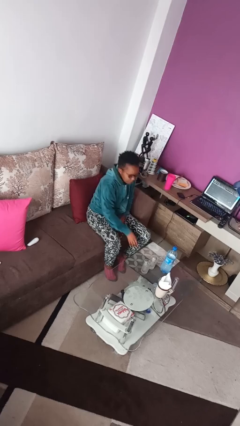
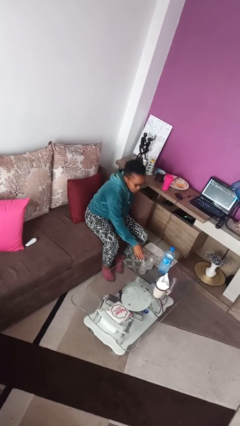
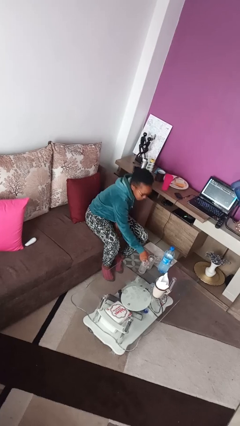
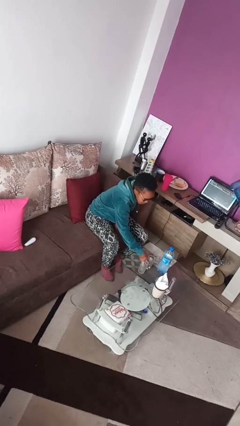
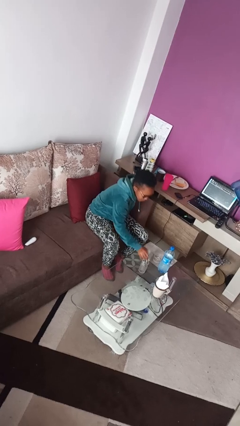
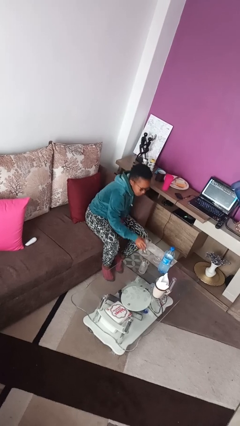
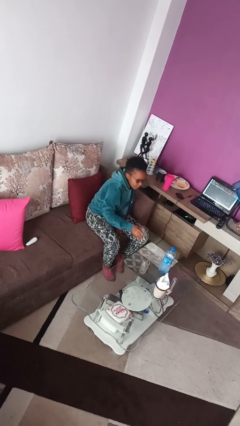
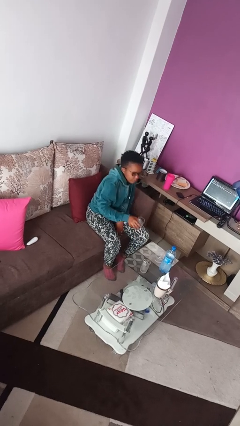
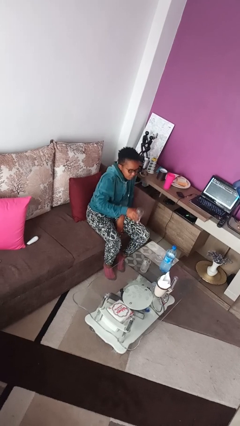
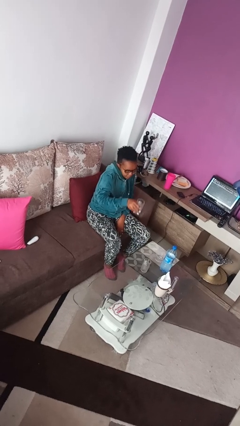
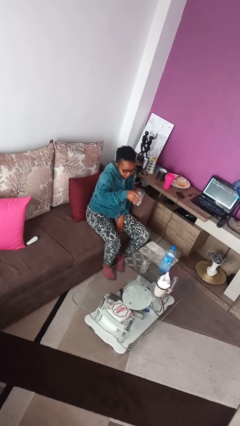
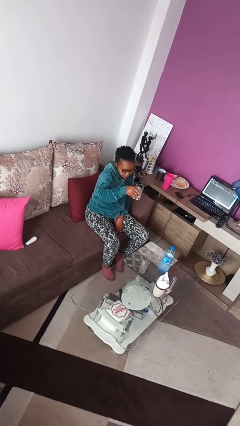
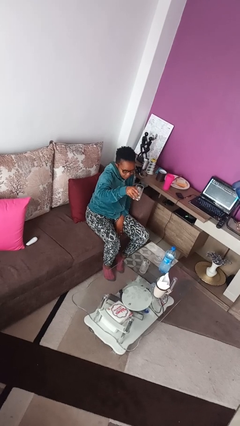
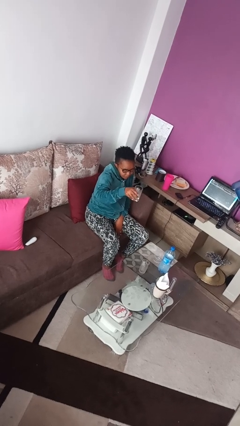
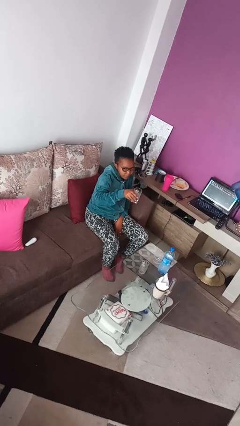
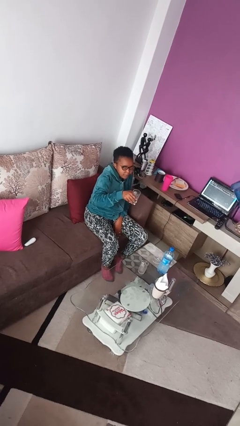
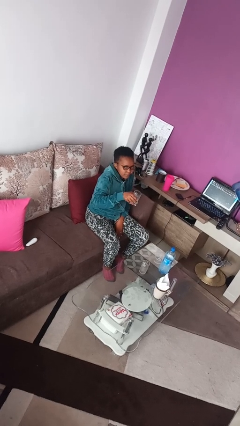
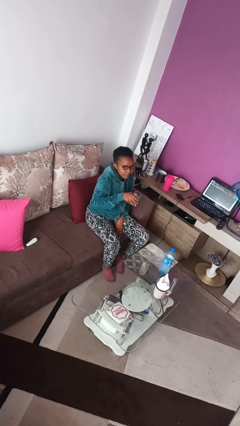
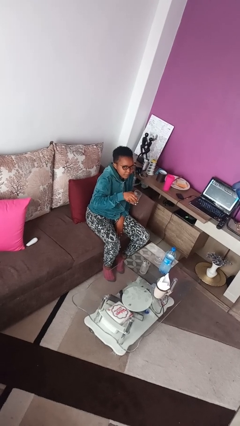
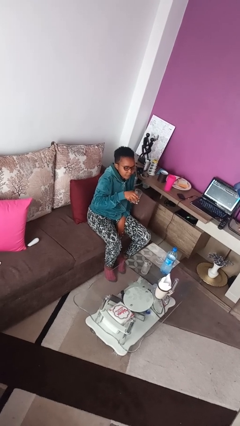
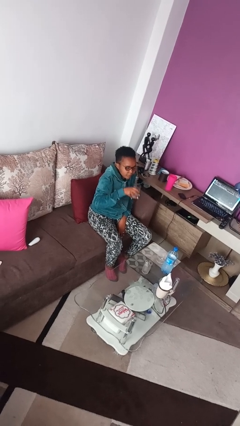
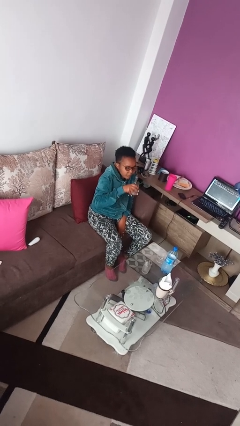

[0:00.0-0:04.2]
person picks up object from table

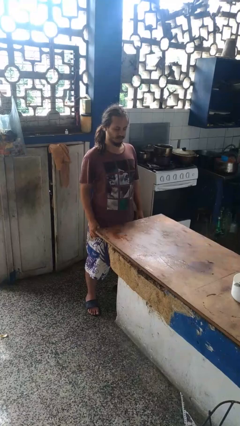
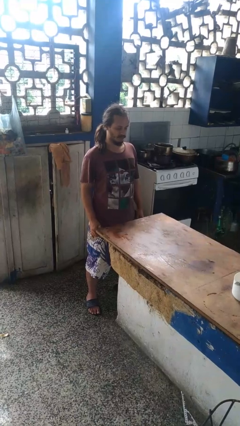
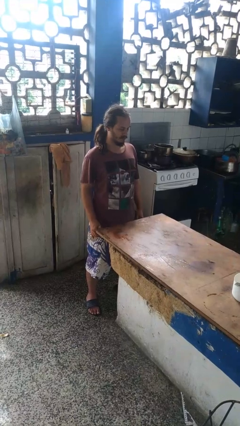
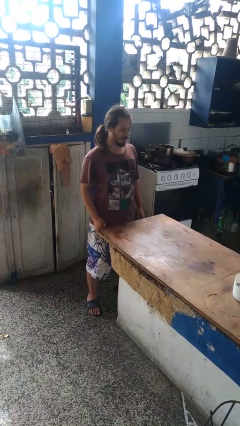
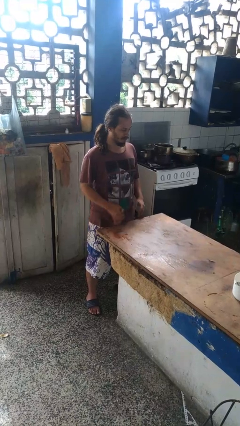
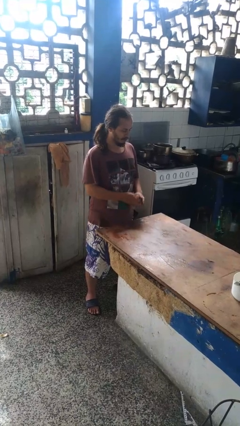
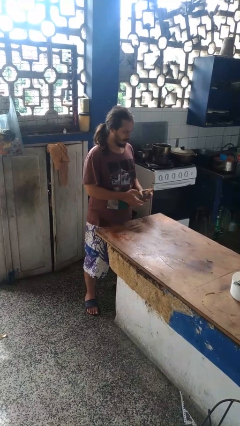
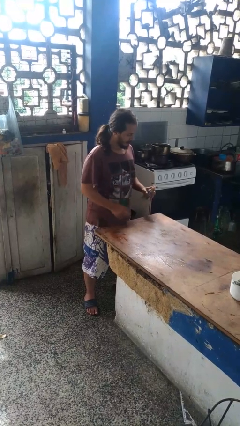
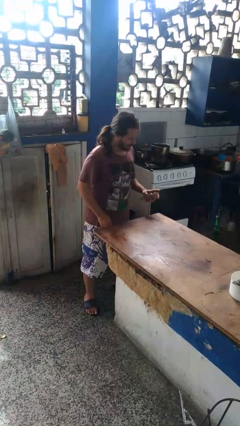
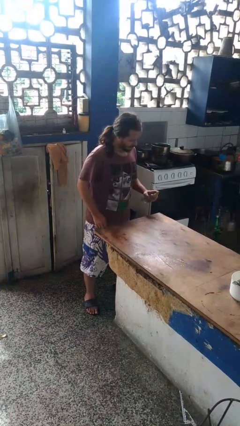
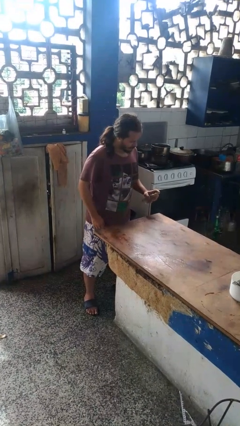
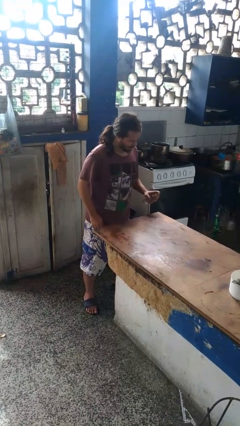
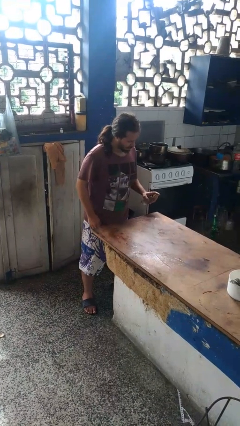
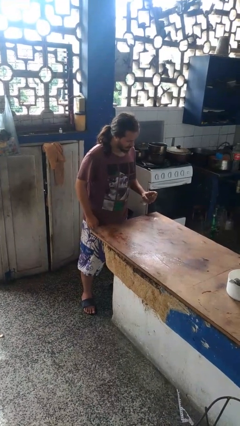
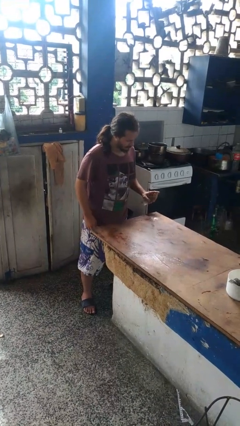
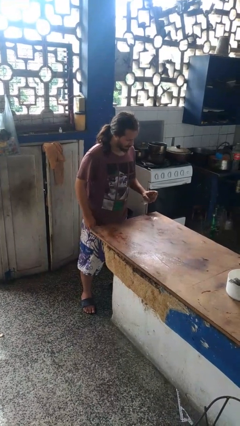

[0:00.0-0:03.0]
person sprays from bottle

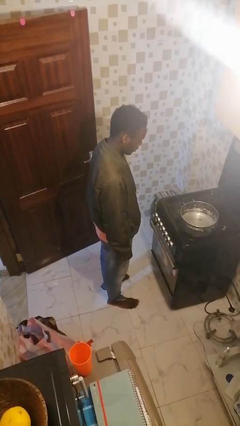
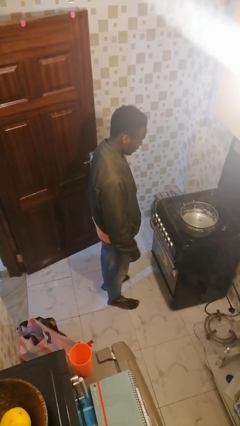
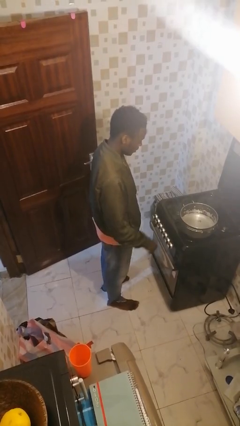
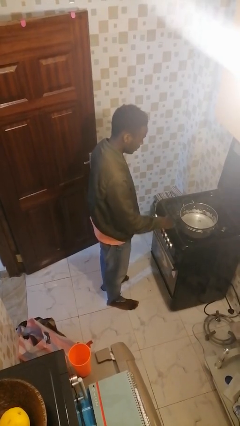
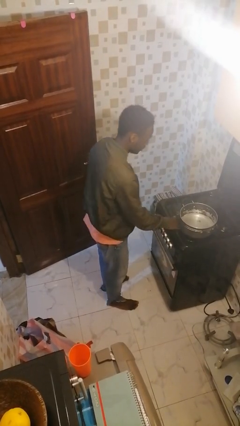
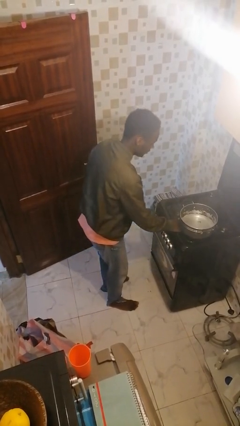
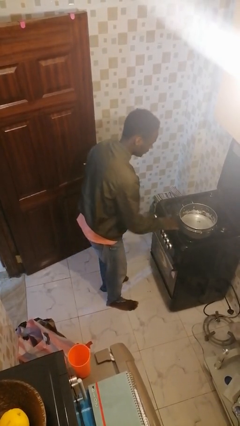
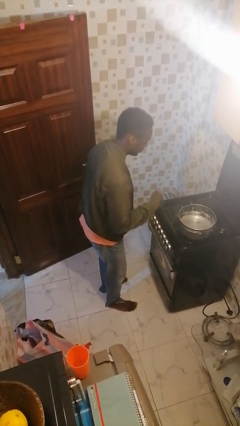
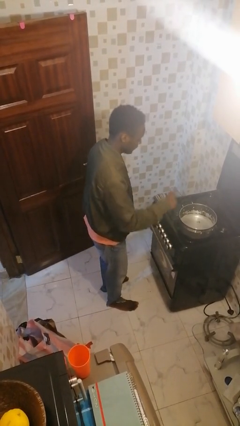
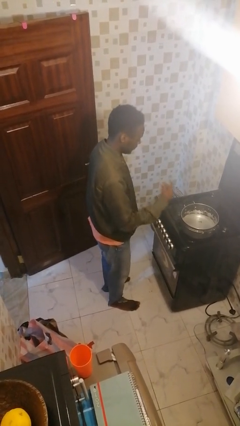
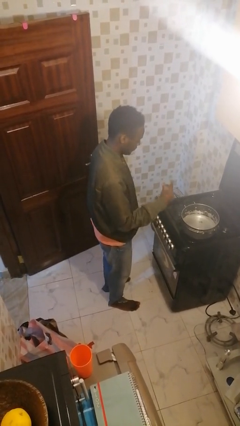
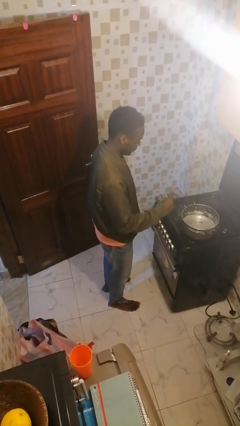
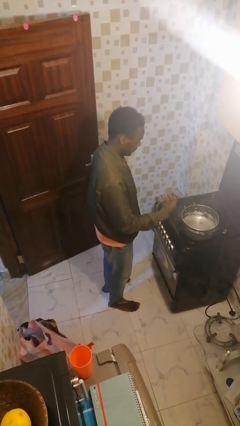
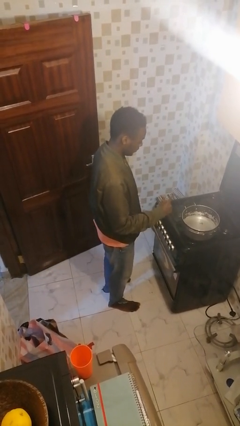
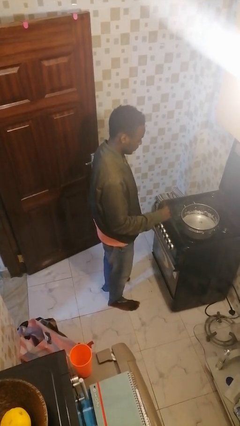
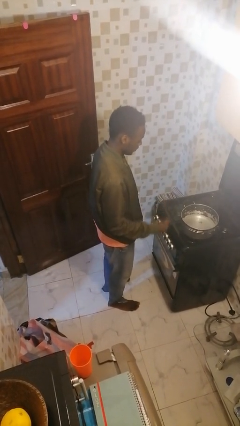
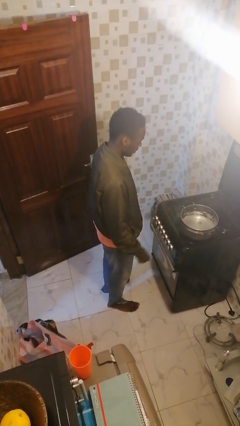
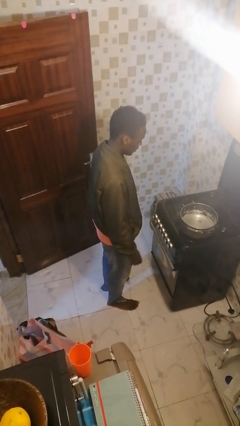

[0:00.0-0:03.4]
person burns hand

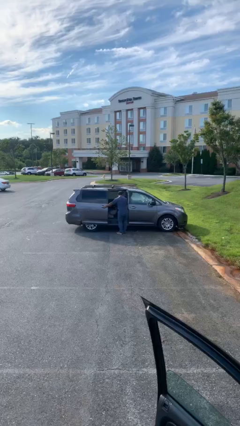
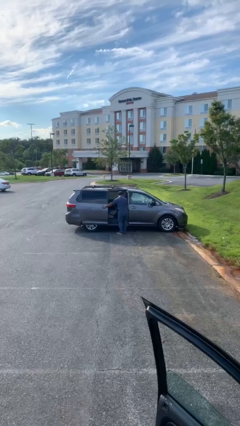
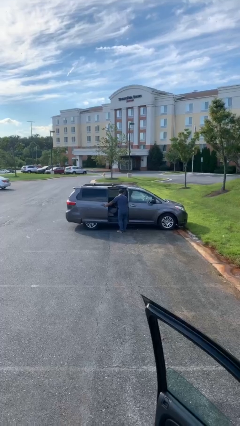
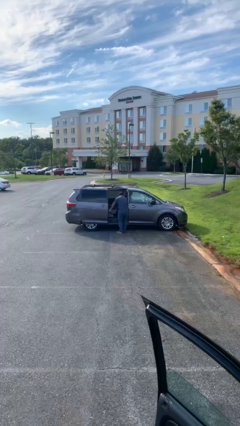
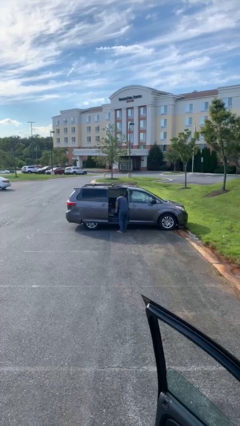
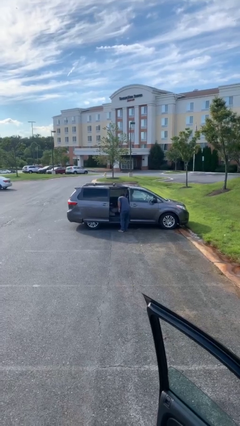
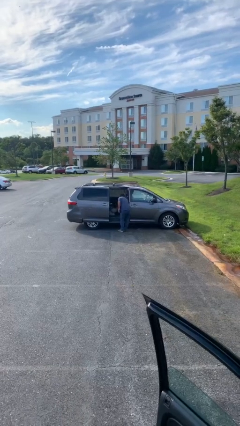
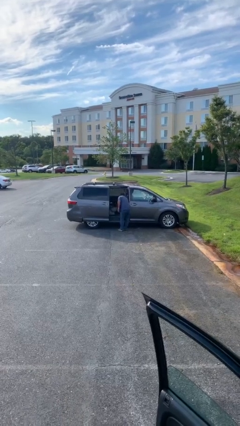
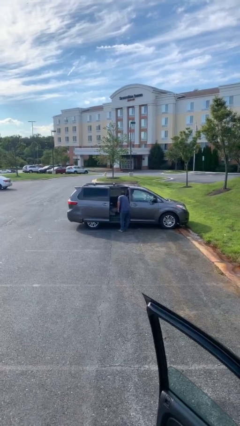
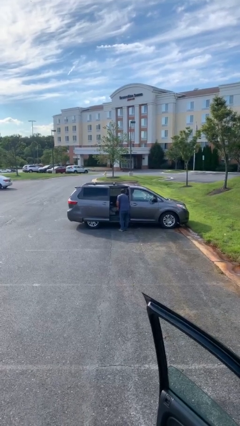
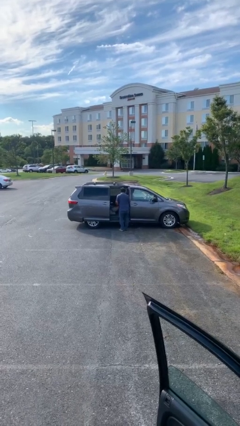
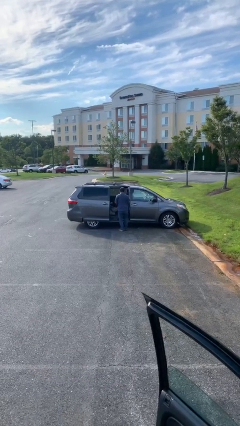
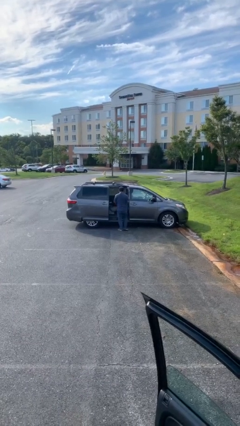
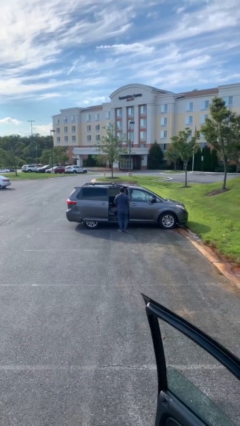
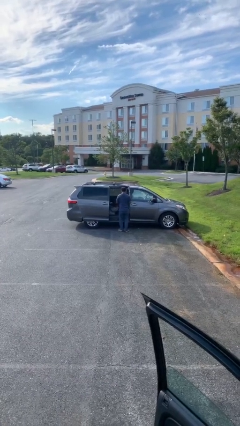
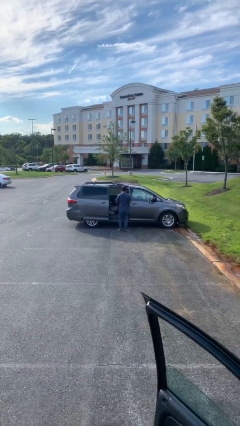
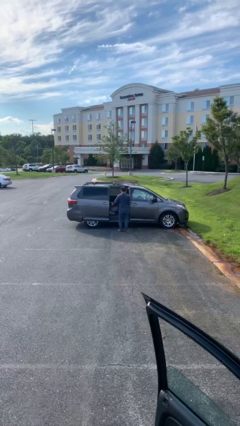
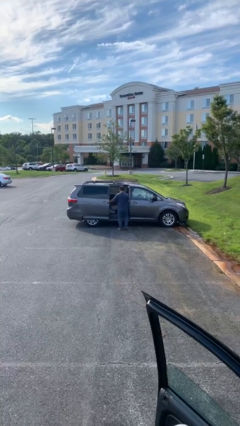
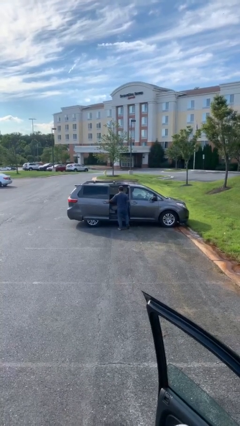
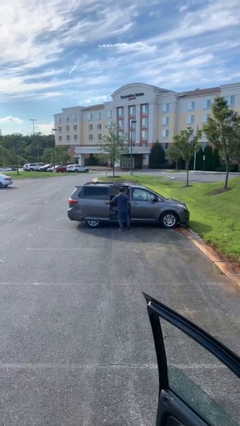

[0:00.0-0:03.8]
person unloads car

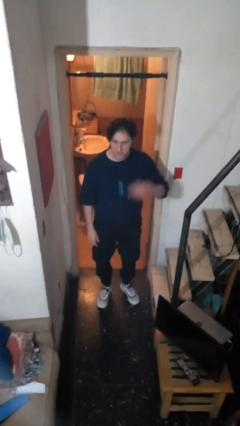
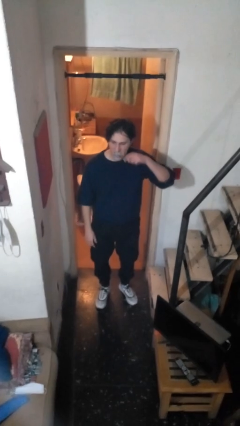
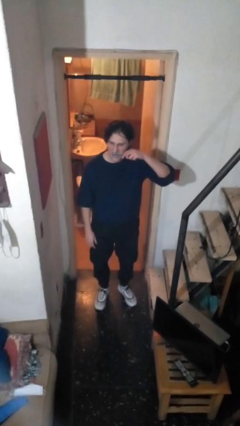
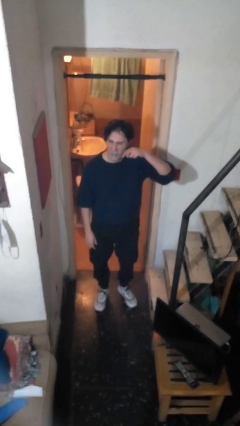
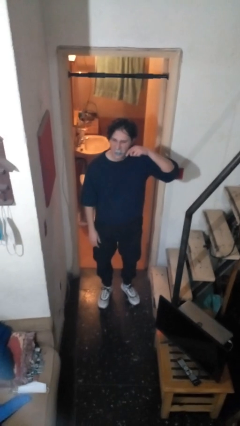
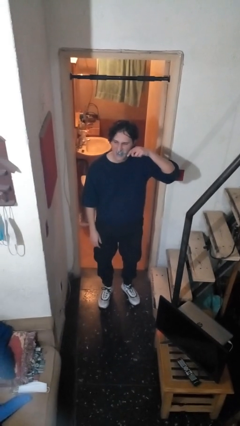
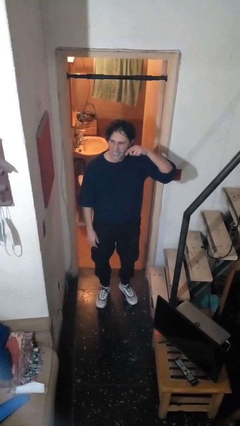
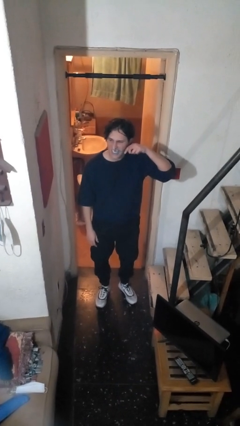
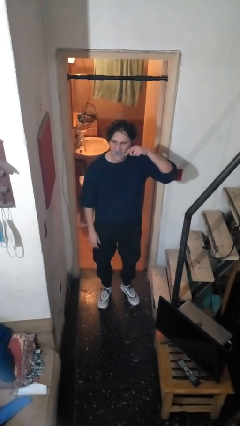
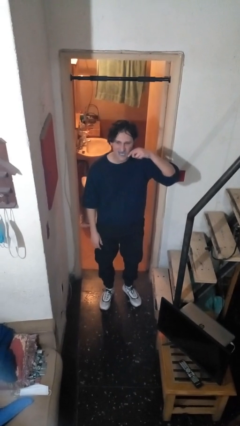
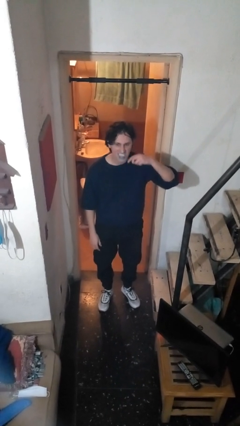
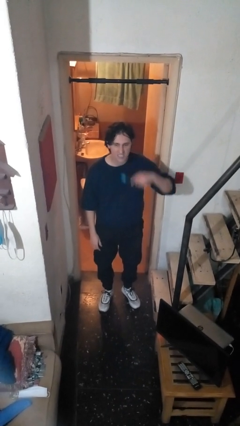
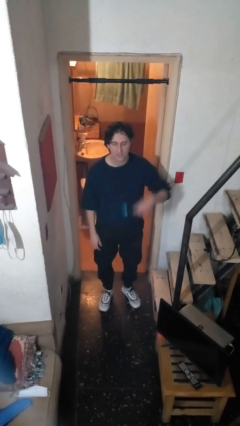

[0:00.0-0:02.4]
person brushes teeth

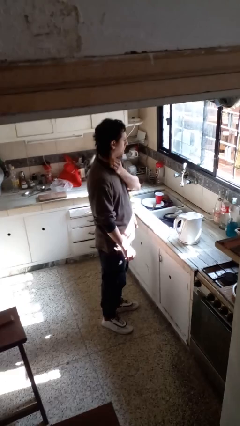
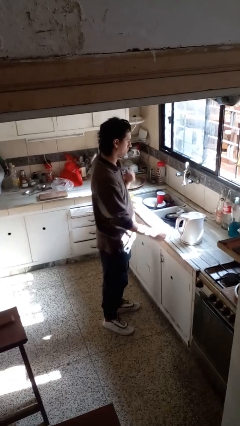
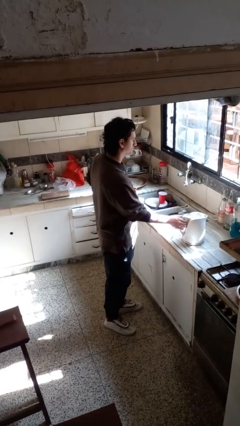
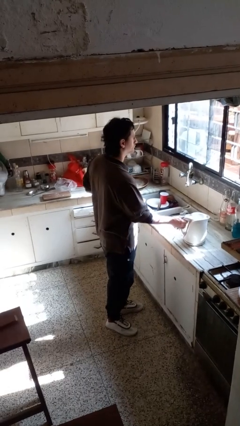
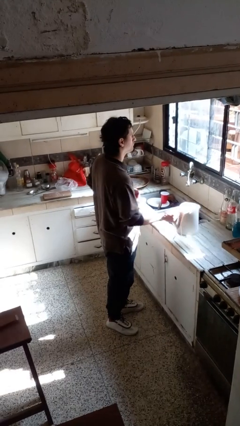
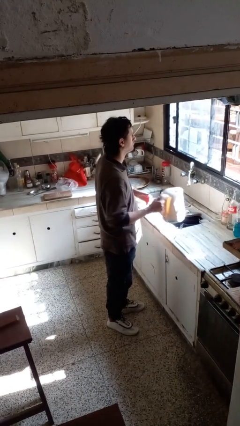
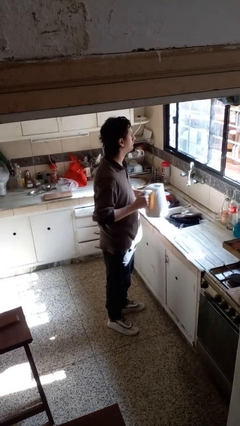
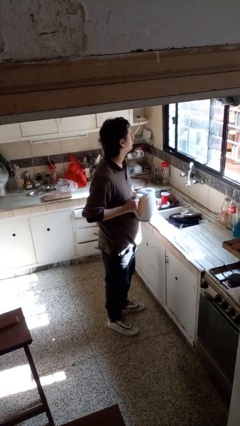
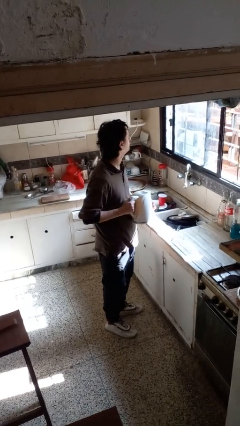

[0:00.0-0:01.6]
person picks up object from countertop
